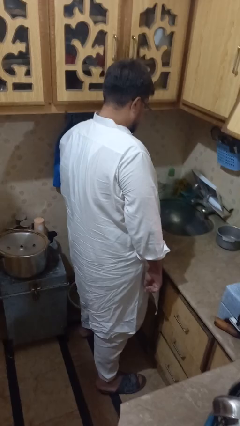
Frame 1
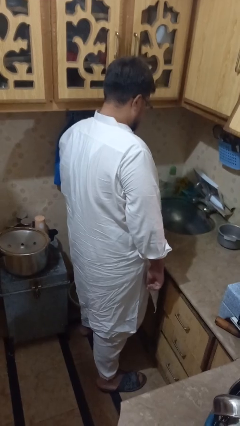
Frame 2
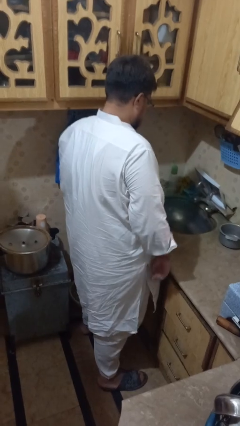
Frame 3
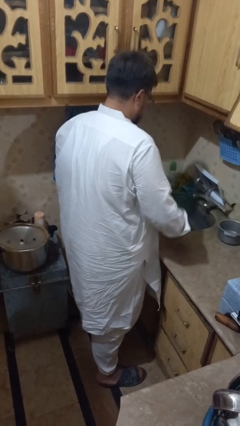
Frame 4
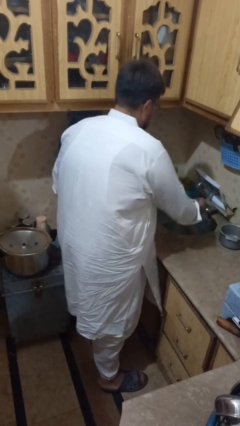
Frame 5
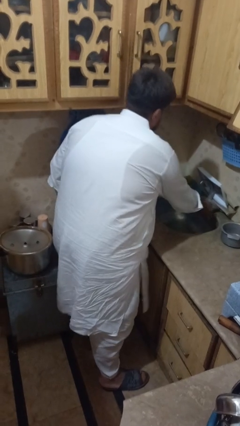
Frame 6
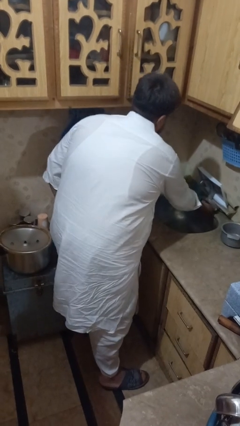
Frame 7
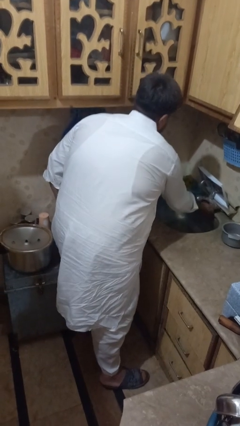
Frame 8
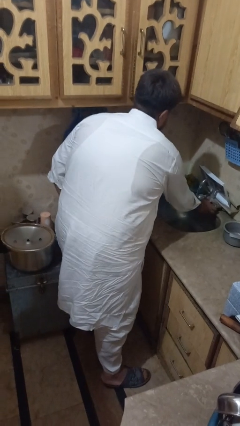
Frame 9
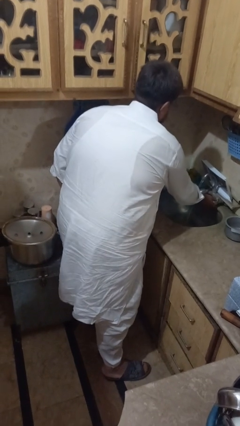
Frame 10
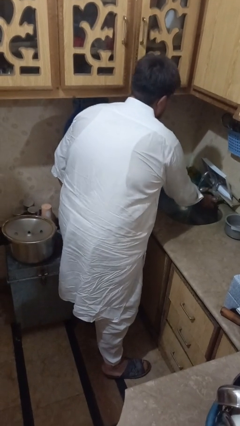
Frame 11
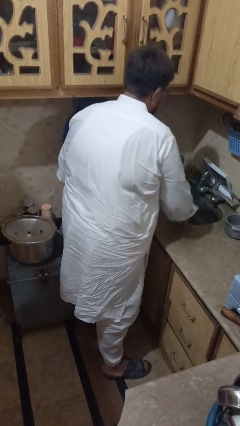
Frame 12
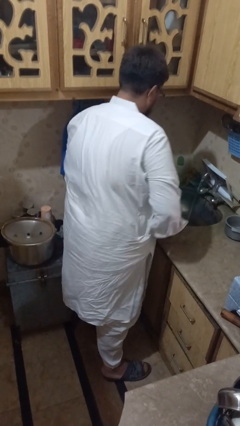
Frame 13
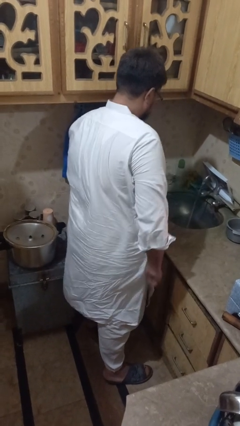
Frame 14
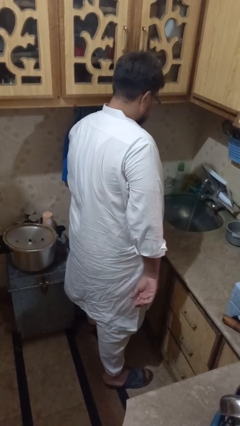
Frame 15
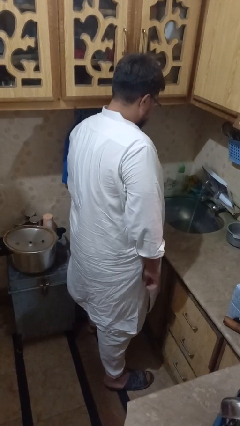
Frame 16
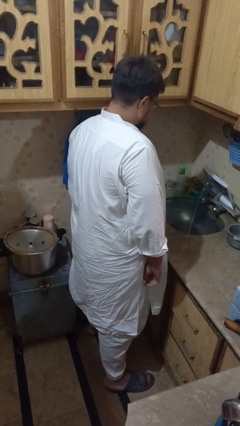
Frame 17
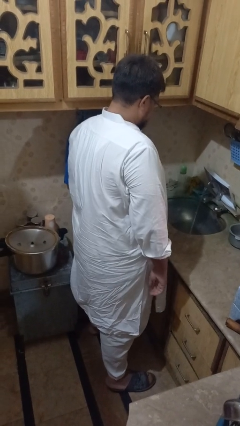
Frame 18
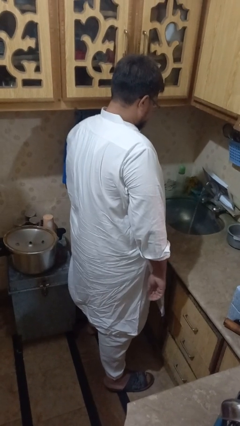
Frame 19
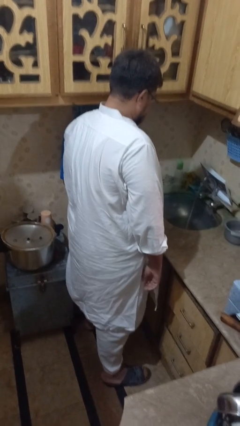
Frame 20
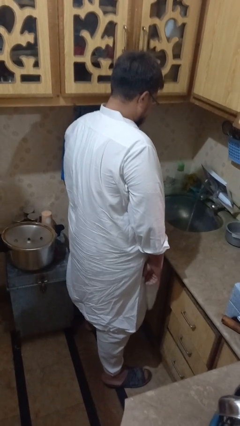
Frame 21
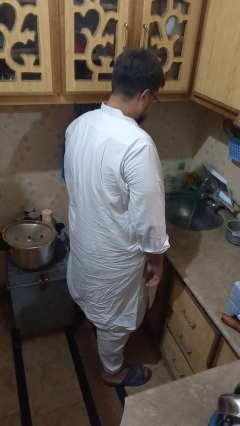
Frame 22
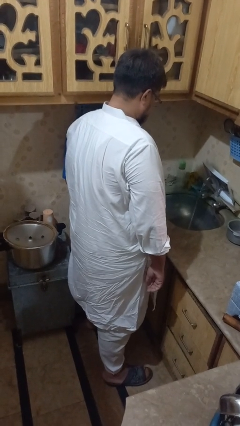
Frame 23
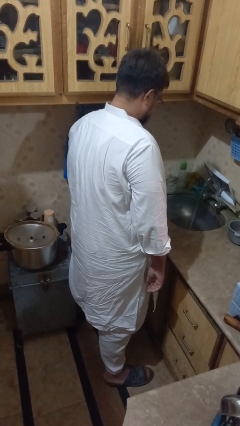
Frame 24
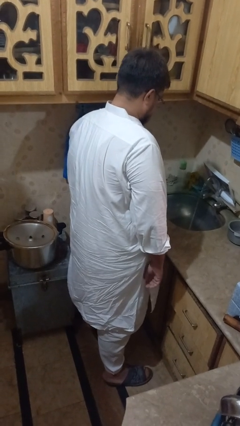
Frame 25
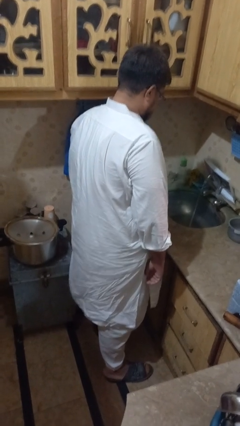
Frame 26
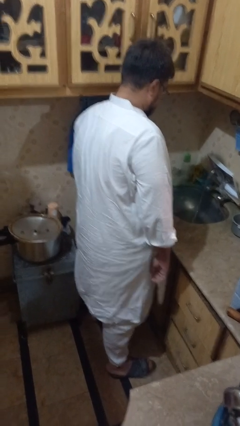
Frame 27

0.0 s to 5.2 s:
person turns on faucet

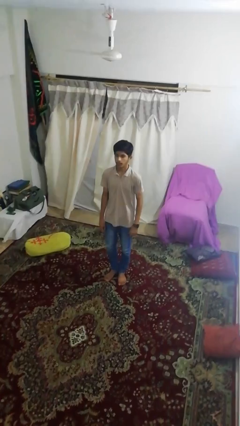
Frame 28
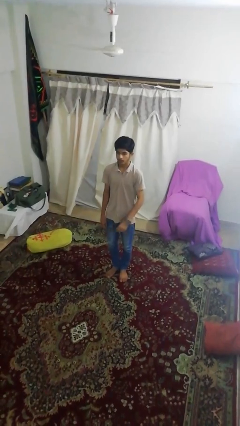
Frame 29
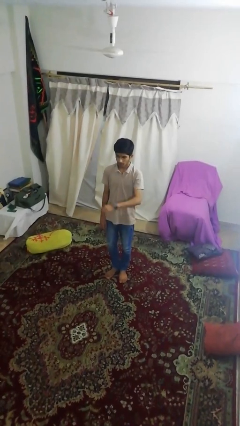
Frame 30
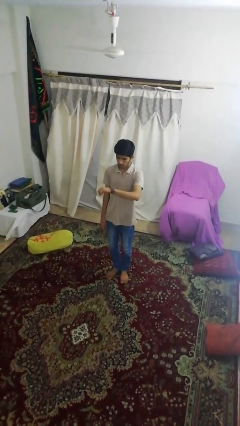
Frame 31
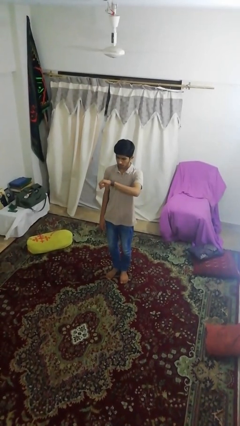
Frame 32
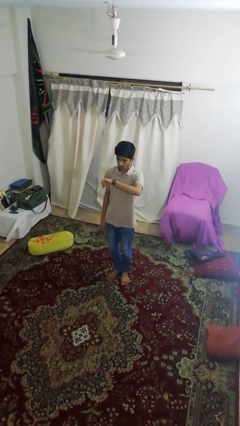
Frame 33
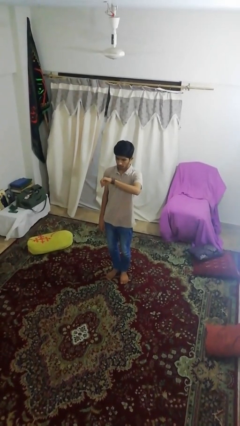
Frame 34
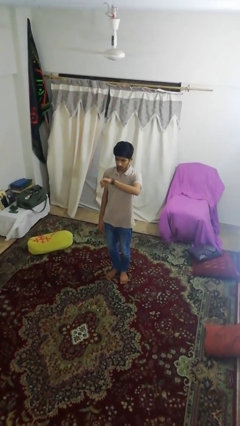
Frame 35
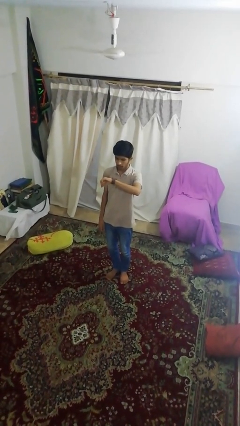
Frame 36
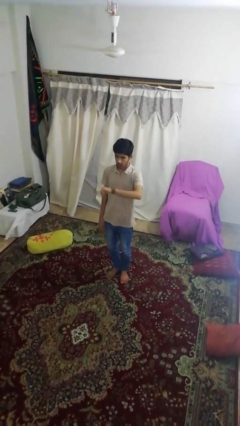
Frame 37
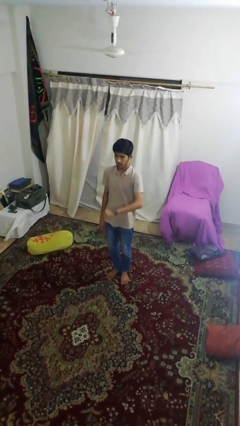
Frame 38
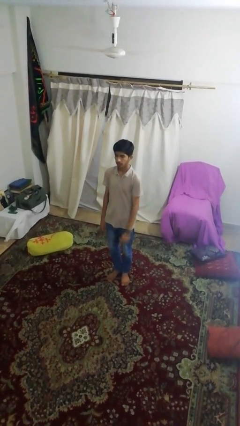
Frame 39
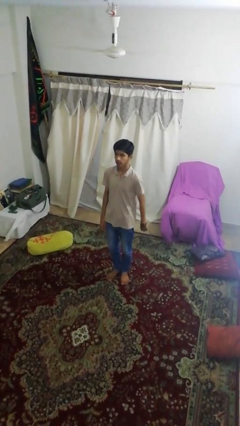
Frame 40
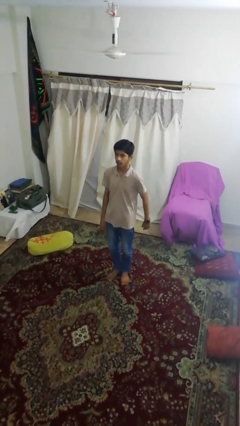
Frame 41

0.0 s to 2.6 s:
person looks at wristwatch

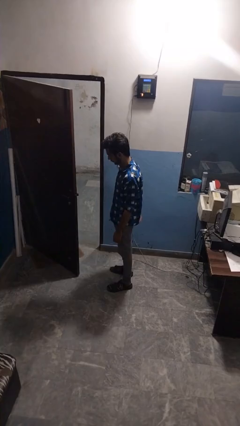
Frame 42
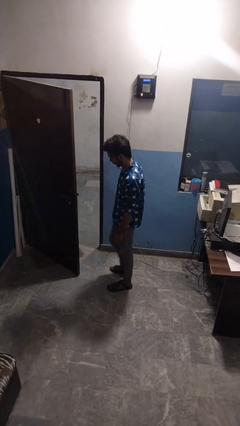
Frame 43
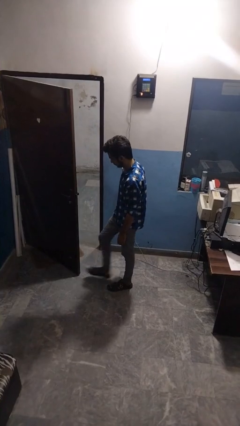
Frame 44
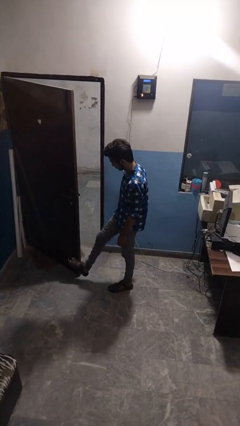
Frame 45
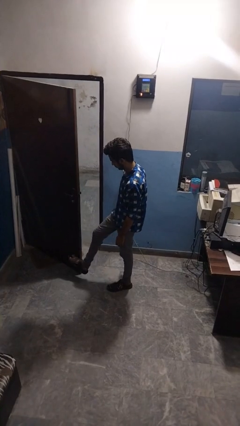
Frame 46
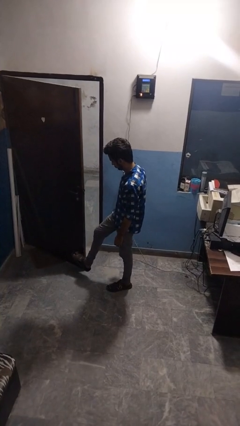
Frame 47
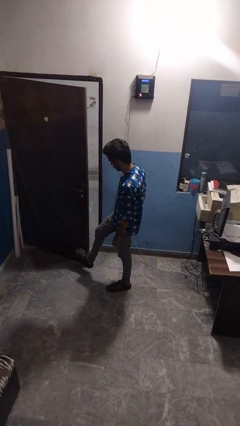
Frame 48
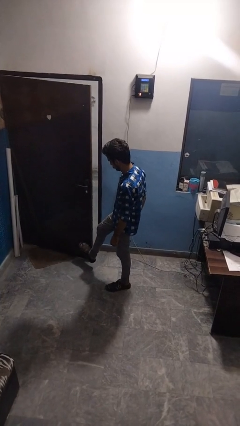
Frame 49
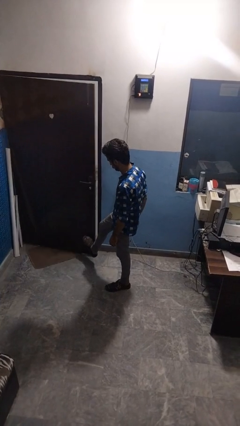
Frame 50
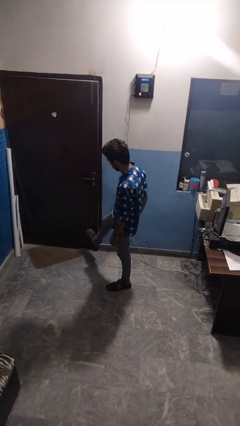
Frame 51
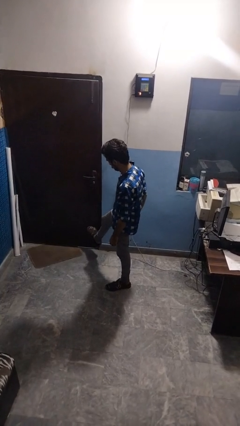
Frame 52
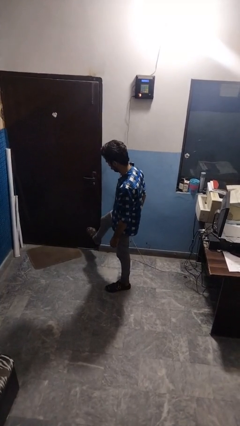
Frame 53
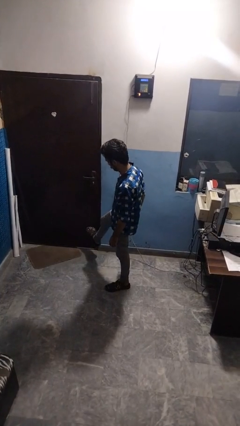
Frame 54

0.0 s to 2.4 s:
person closes door with foot

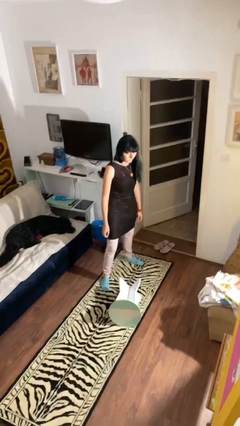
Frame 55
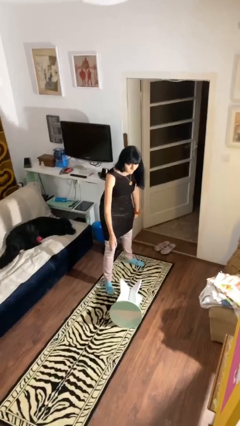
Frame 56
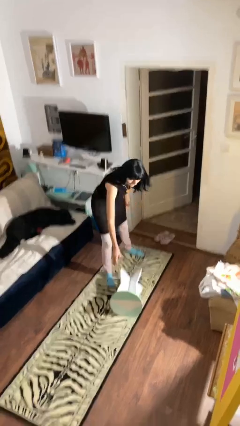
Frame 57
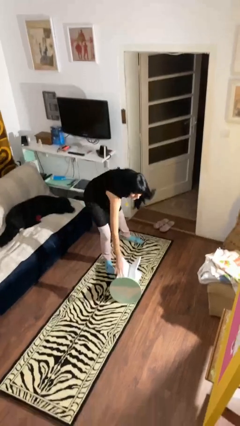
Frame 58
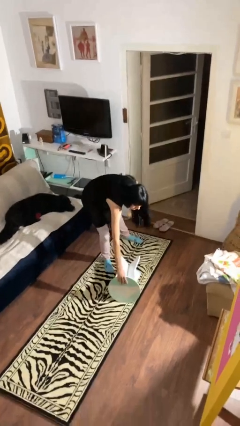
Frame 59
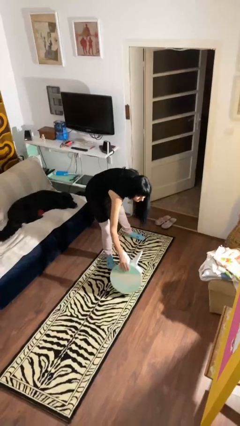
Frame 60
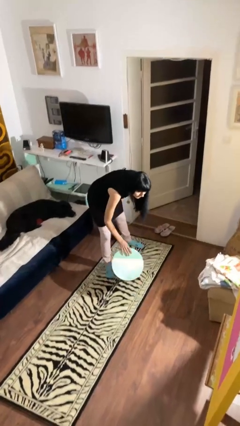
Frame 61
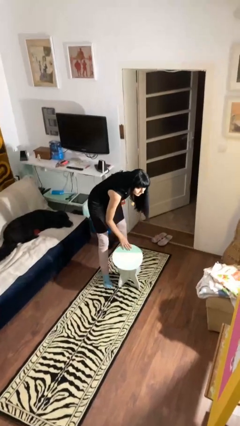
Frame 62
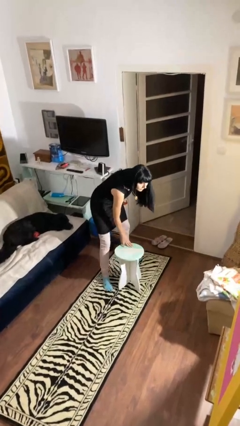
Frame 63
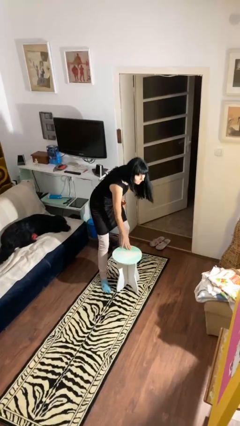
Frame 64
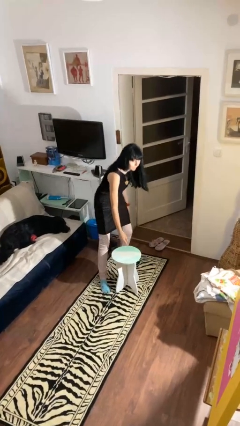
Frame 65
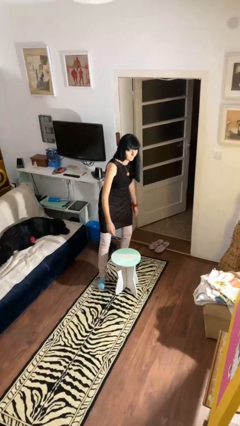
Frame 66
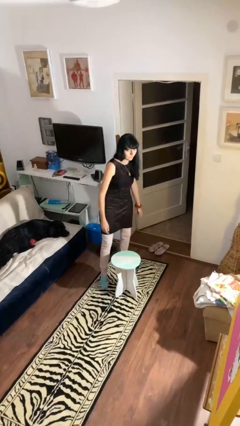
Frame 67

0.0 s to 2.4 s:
person sets upright furniture

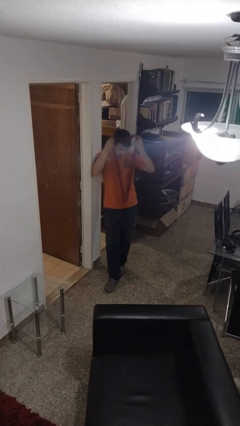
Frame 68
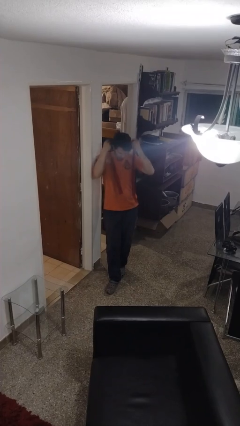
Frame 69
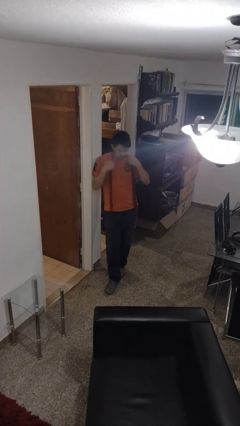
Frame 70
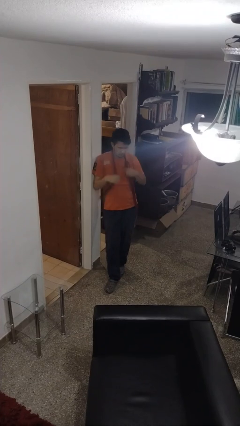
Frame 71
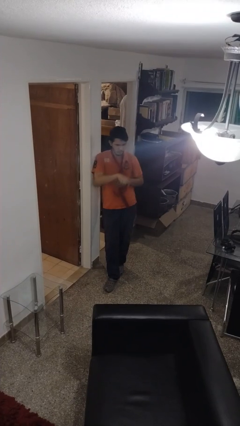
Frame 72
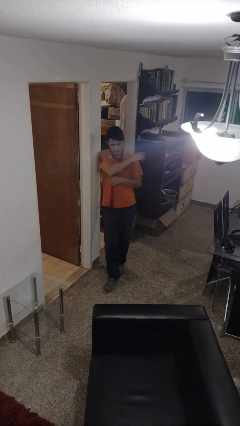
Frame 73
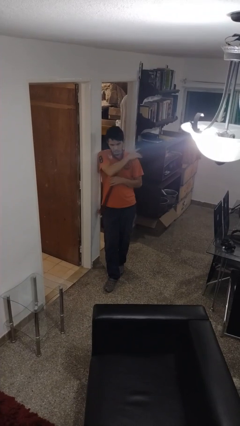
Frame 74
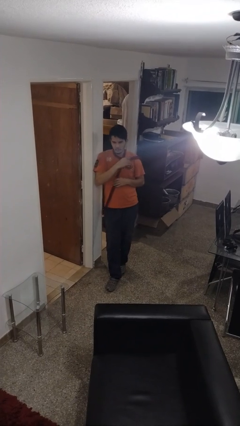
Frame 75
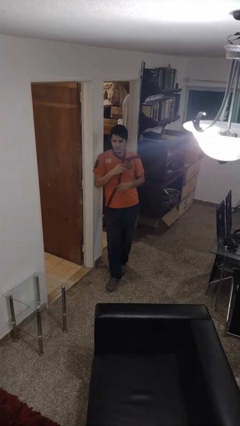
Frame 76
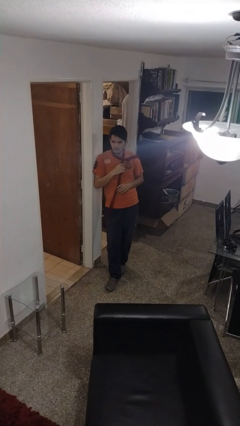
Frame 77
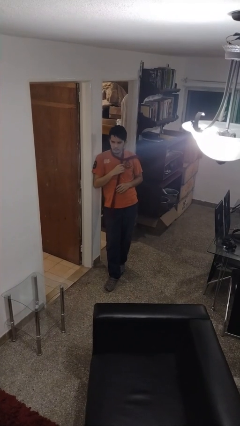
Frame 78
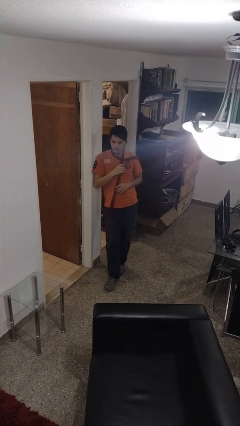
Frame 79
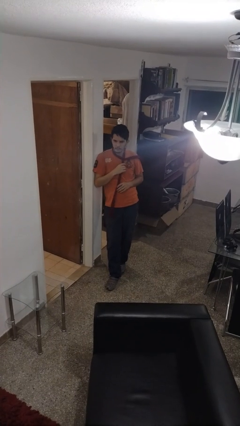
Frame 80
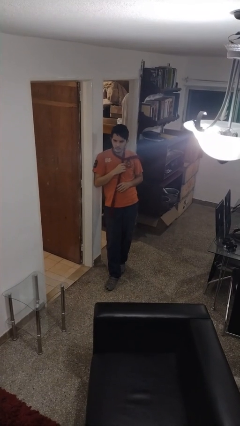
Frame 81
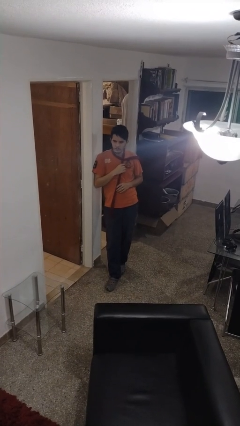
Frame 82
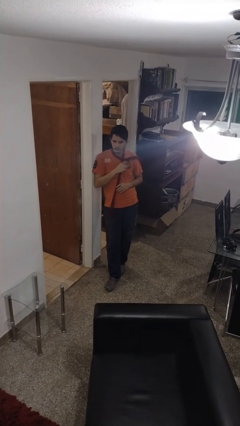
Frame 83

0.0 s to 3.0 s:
person puts on scarf

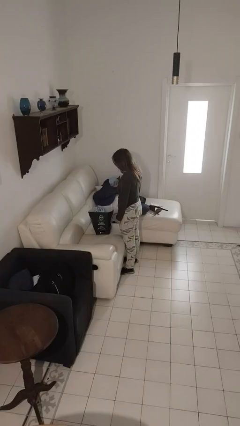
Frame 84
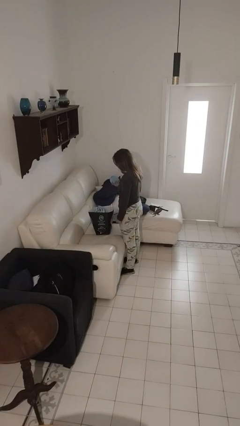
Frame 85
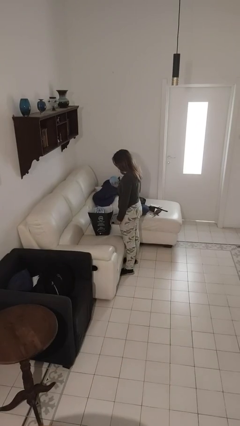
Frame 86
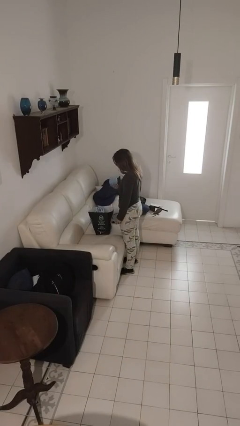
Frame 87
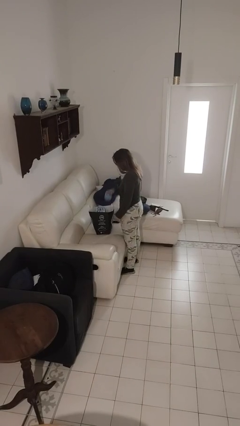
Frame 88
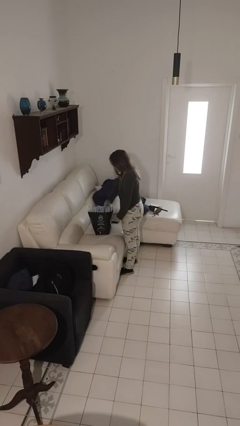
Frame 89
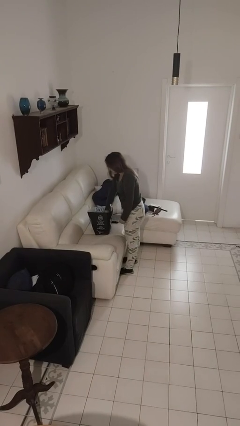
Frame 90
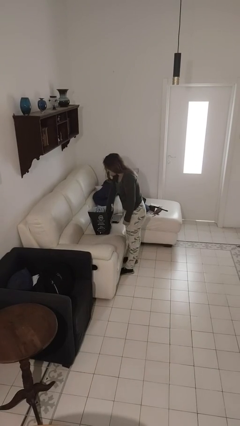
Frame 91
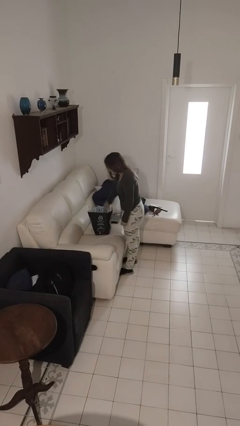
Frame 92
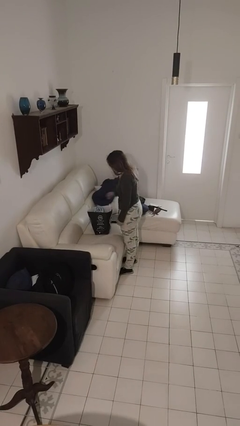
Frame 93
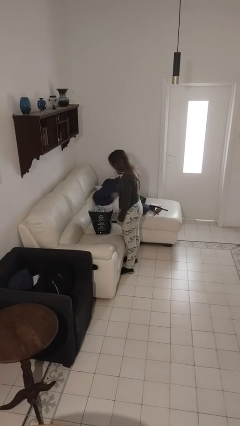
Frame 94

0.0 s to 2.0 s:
person puts object into bag
